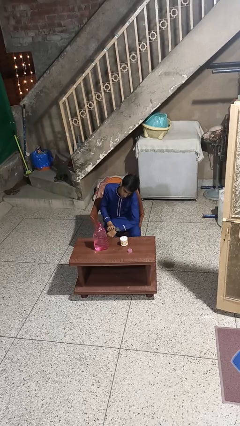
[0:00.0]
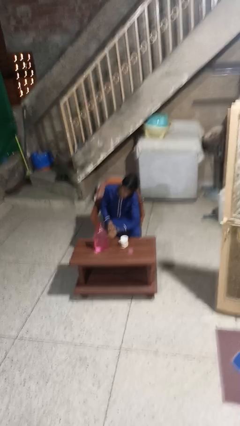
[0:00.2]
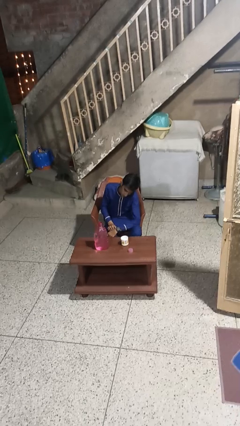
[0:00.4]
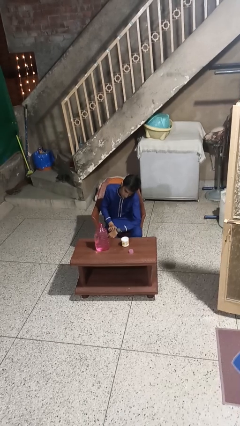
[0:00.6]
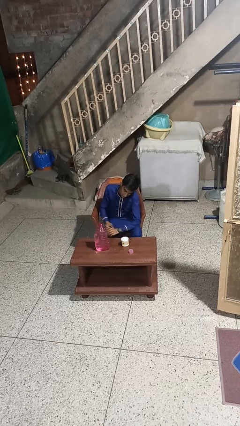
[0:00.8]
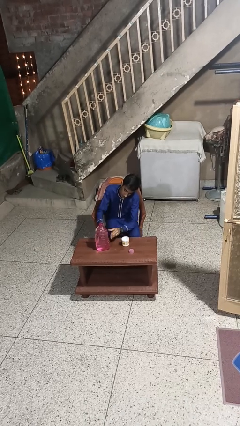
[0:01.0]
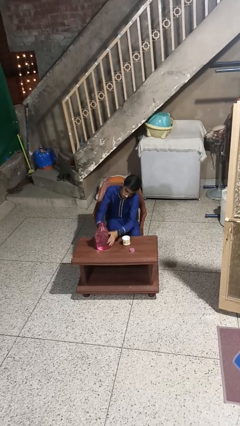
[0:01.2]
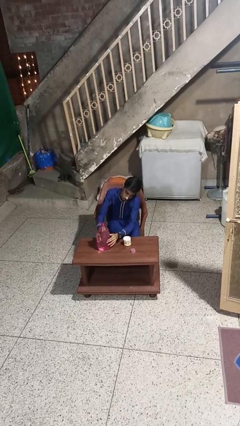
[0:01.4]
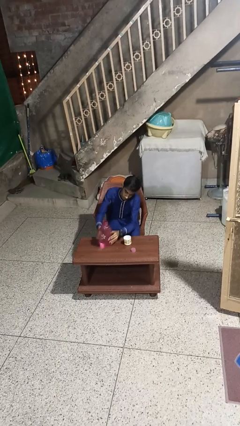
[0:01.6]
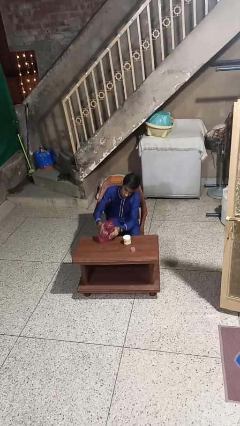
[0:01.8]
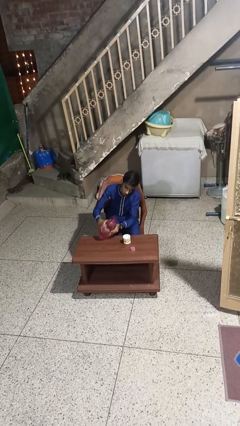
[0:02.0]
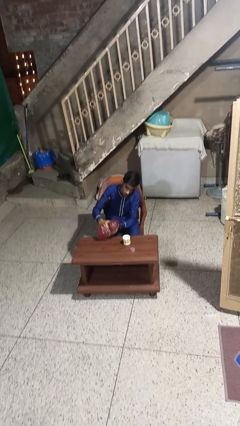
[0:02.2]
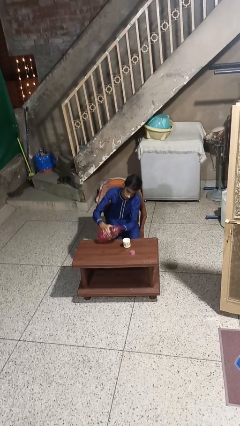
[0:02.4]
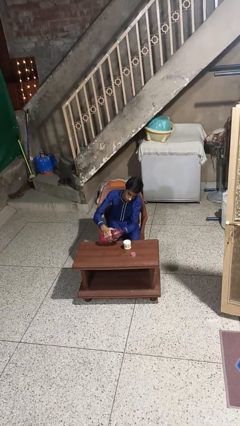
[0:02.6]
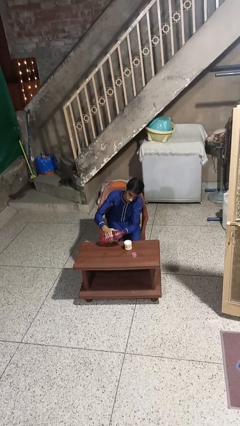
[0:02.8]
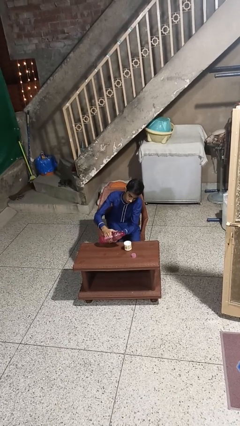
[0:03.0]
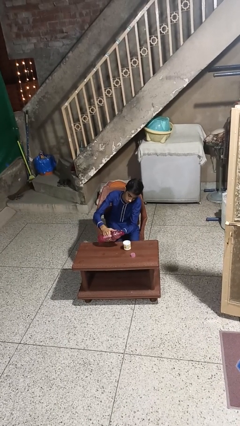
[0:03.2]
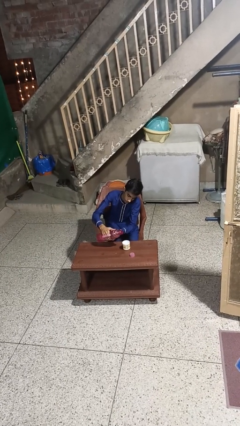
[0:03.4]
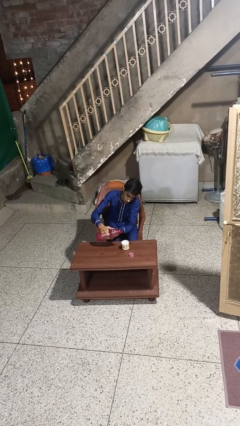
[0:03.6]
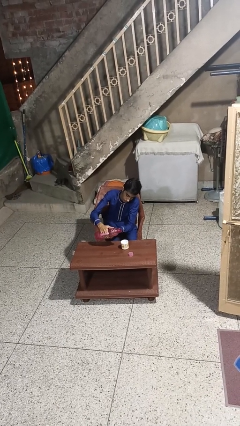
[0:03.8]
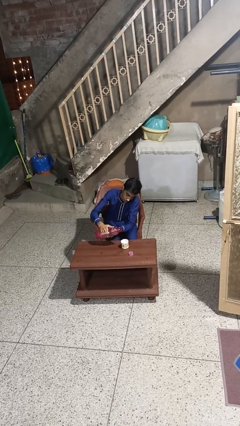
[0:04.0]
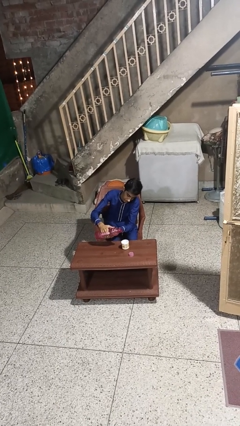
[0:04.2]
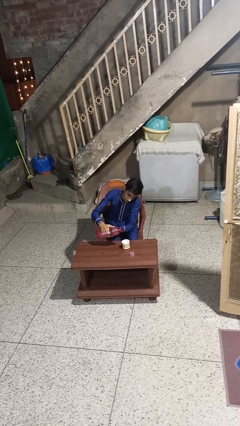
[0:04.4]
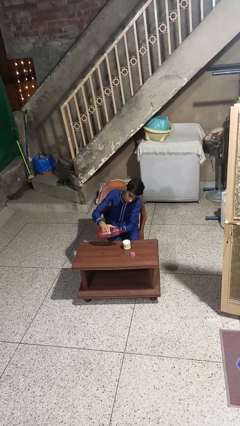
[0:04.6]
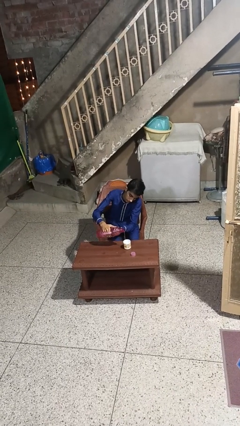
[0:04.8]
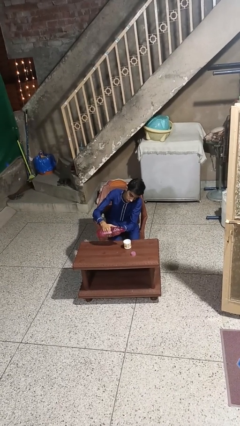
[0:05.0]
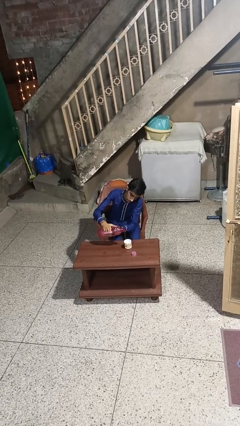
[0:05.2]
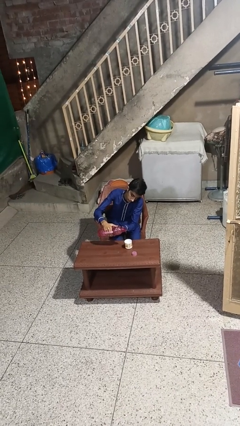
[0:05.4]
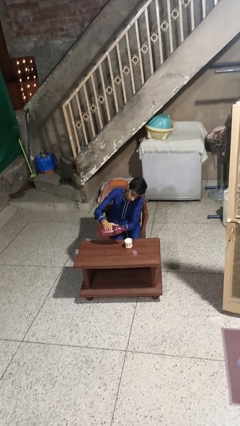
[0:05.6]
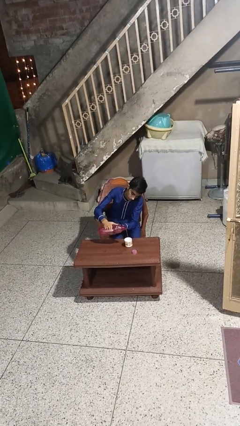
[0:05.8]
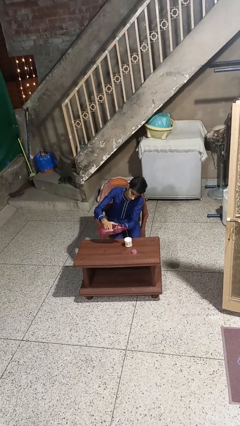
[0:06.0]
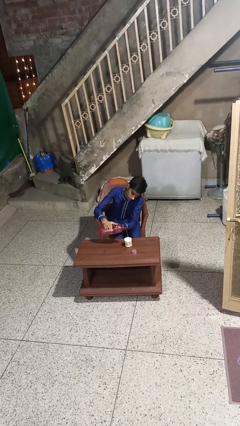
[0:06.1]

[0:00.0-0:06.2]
person pours liquid into cup

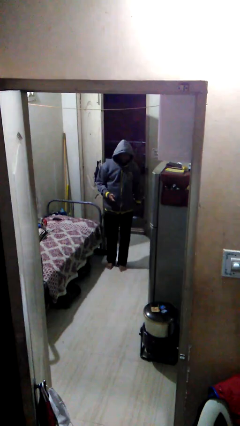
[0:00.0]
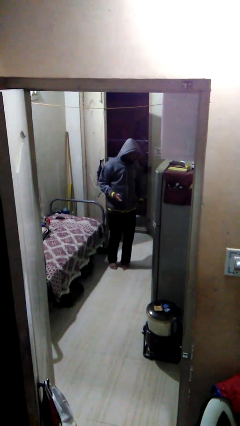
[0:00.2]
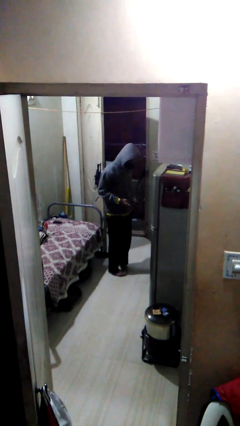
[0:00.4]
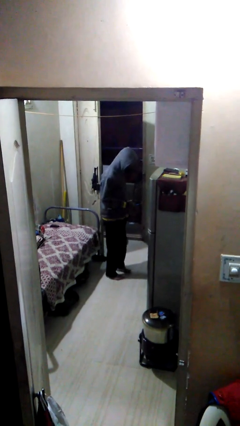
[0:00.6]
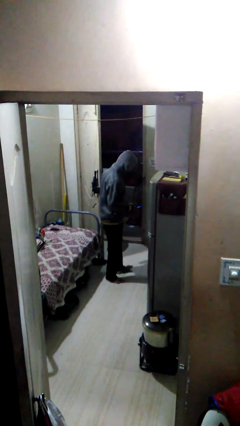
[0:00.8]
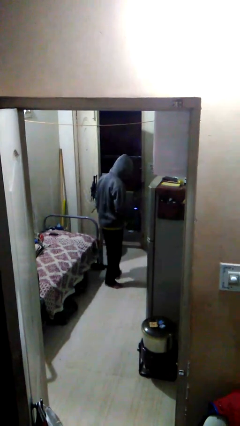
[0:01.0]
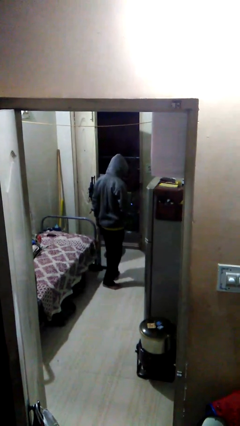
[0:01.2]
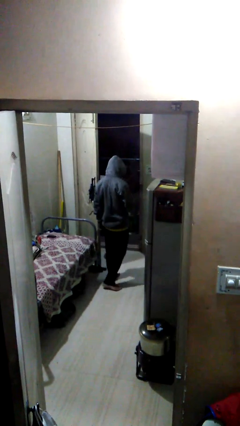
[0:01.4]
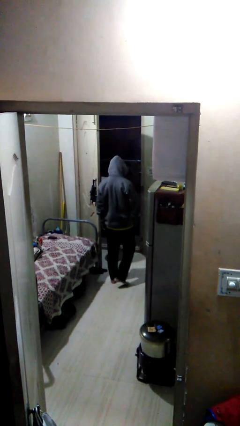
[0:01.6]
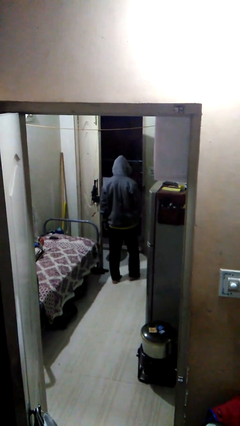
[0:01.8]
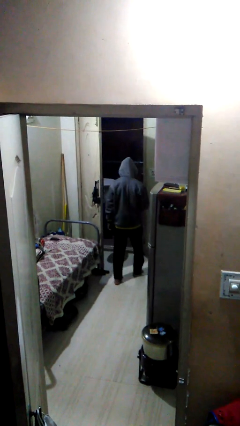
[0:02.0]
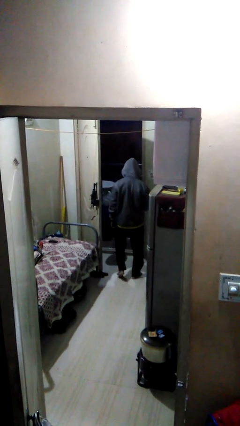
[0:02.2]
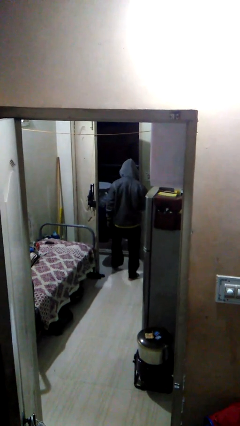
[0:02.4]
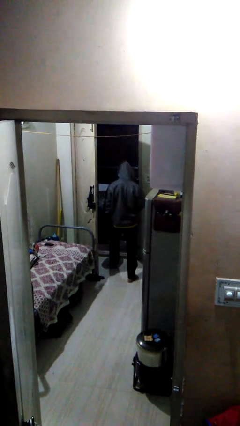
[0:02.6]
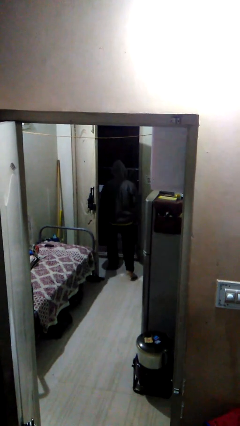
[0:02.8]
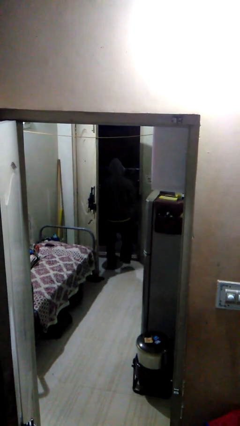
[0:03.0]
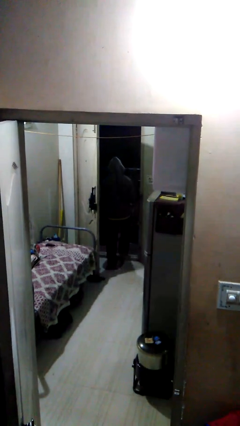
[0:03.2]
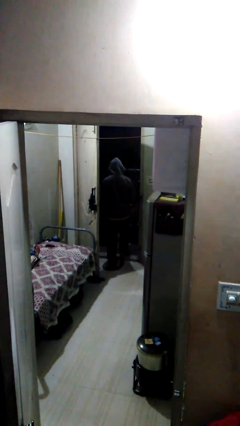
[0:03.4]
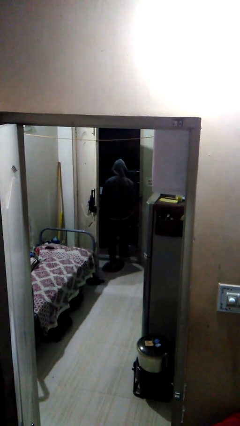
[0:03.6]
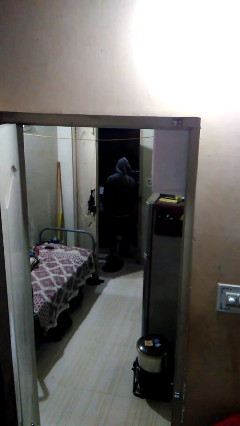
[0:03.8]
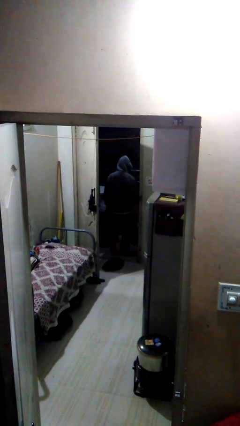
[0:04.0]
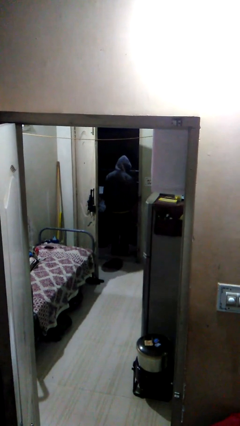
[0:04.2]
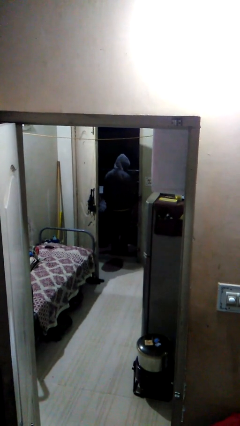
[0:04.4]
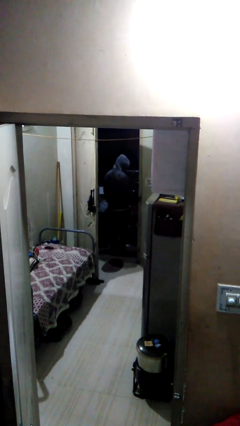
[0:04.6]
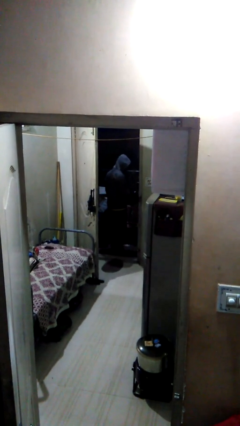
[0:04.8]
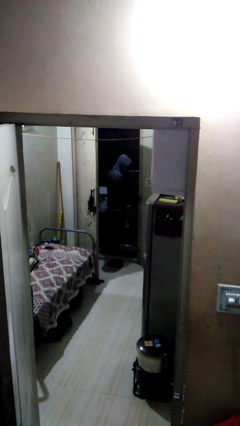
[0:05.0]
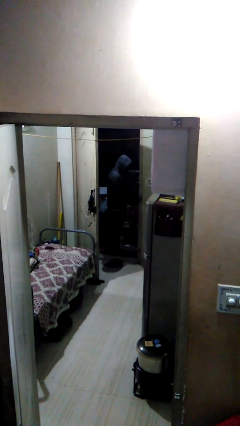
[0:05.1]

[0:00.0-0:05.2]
person exits scene through structure

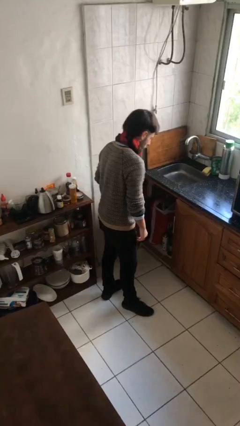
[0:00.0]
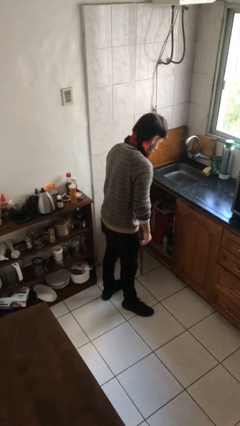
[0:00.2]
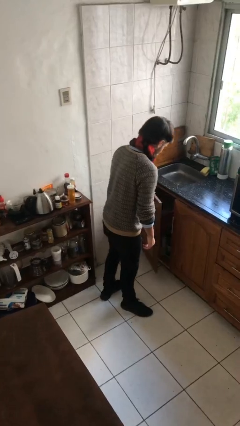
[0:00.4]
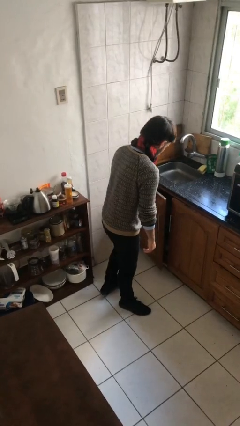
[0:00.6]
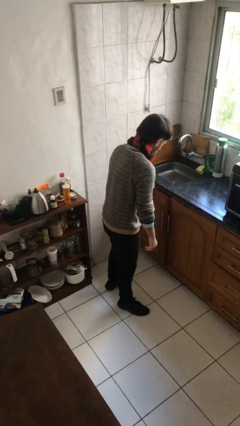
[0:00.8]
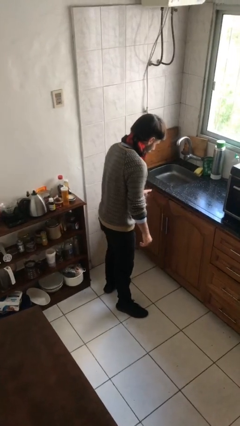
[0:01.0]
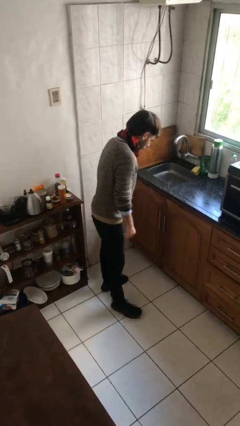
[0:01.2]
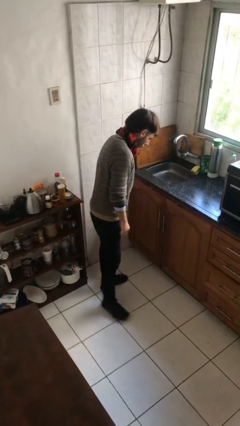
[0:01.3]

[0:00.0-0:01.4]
person closes cabinet

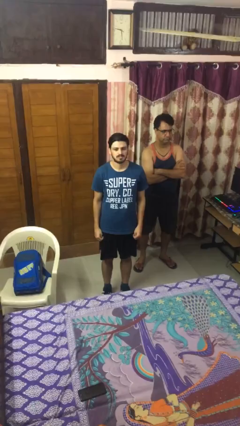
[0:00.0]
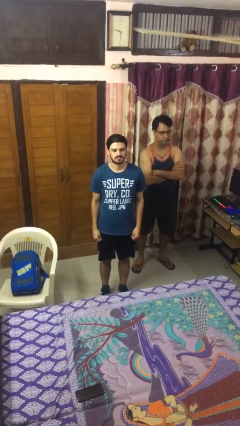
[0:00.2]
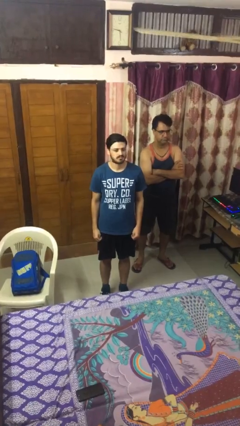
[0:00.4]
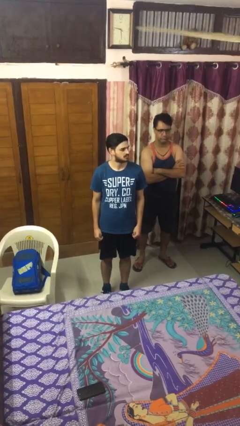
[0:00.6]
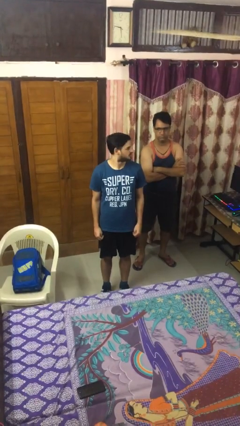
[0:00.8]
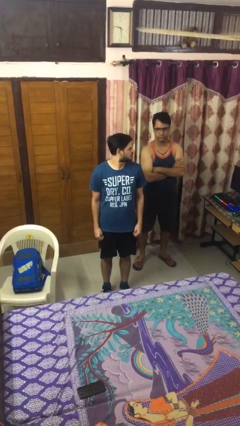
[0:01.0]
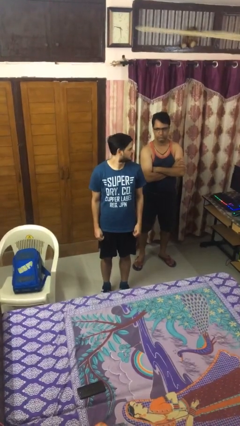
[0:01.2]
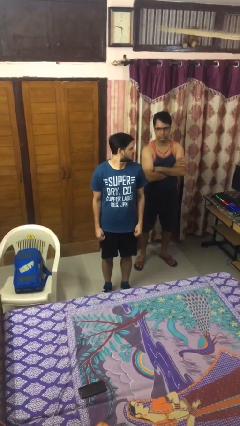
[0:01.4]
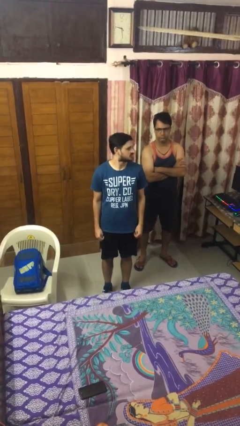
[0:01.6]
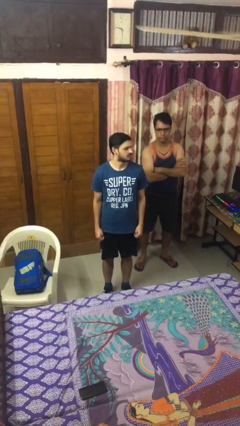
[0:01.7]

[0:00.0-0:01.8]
person looks over shoulder

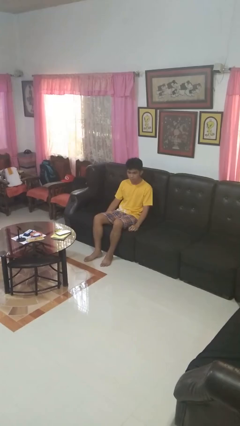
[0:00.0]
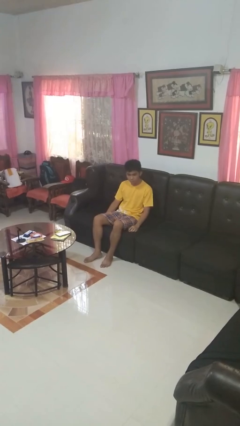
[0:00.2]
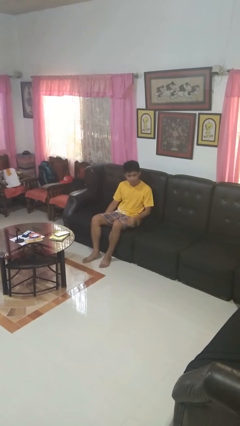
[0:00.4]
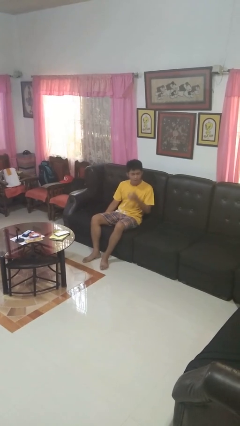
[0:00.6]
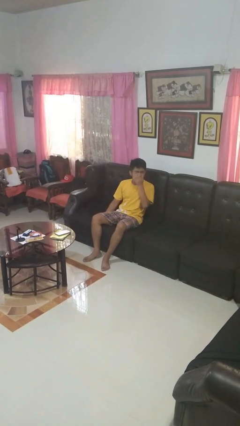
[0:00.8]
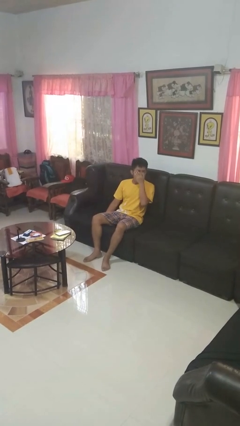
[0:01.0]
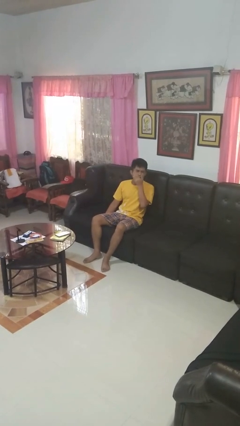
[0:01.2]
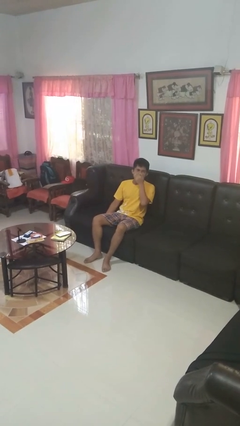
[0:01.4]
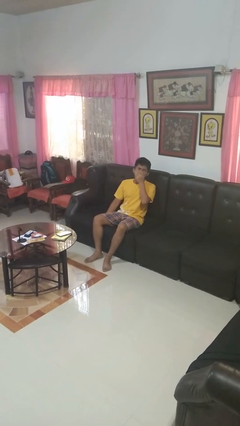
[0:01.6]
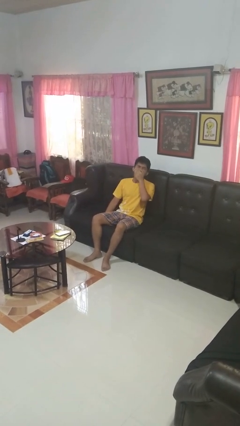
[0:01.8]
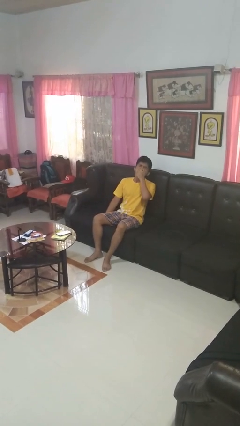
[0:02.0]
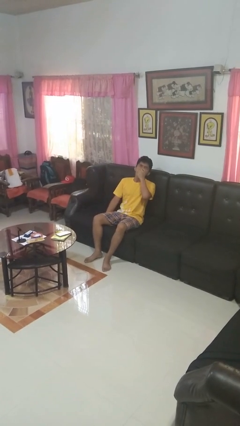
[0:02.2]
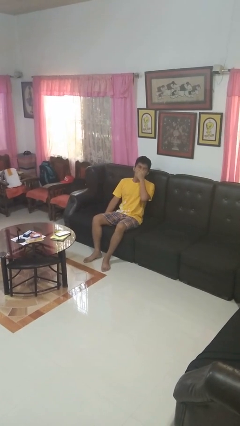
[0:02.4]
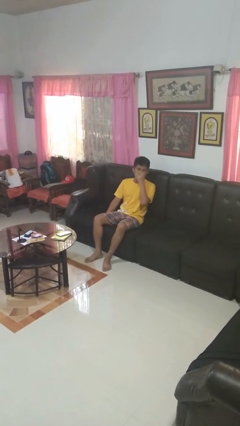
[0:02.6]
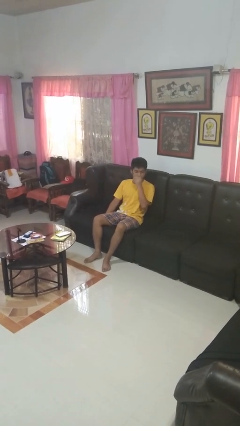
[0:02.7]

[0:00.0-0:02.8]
person yawns
